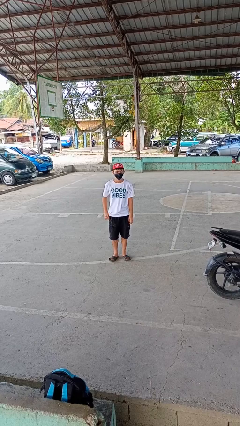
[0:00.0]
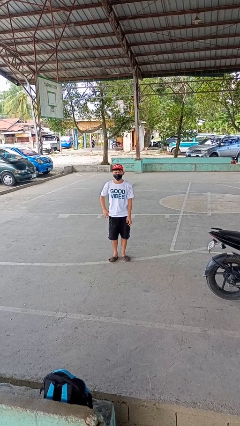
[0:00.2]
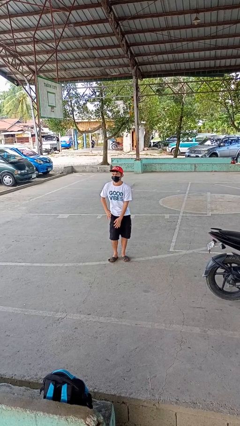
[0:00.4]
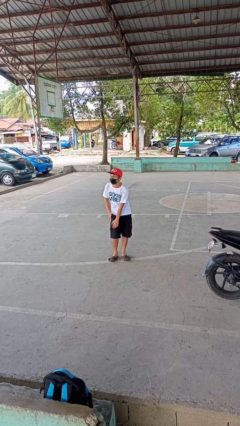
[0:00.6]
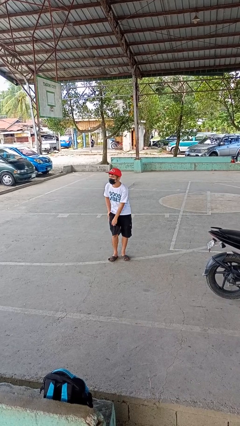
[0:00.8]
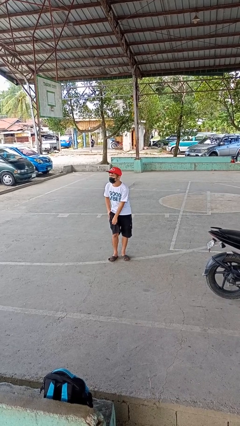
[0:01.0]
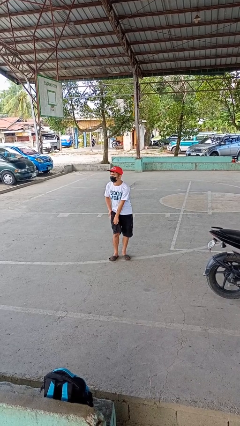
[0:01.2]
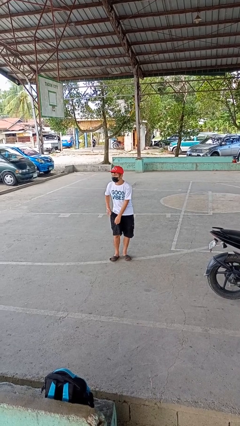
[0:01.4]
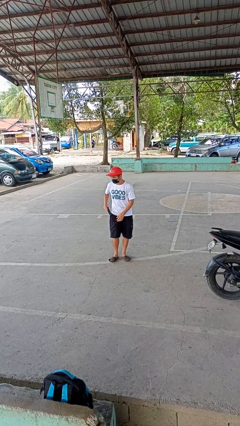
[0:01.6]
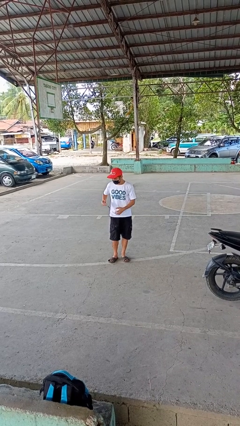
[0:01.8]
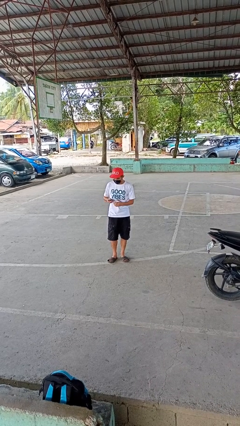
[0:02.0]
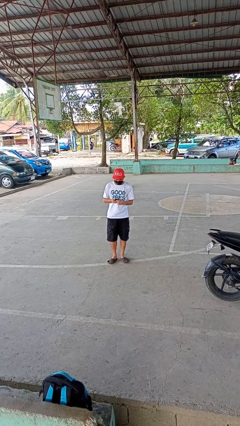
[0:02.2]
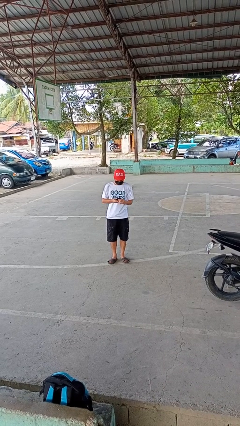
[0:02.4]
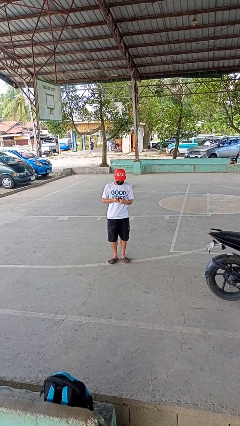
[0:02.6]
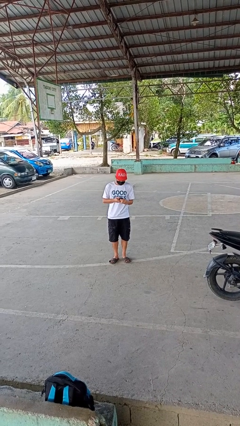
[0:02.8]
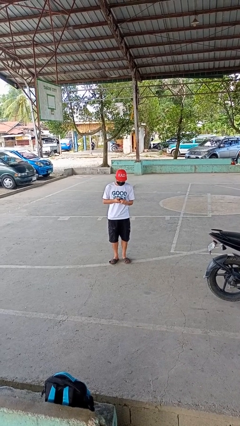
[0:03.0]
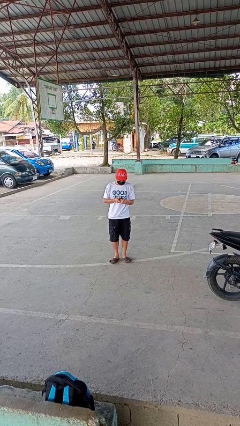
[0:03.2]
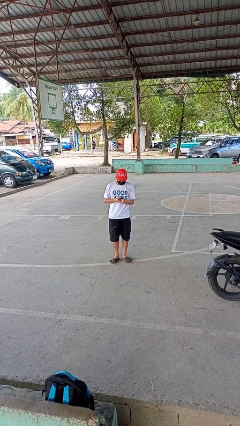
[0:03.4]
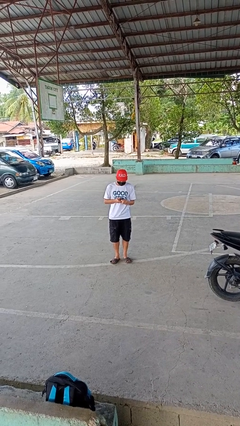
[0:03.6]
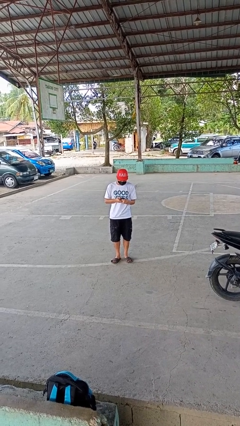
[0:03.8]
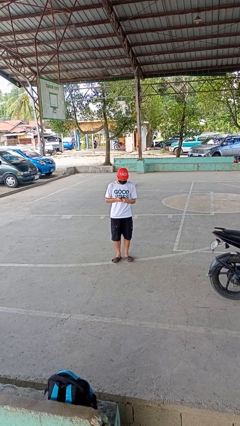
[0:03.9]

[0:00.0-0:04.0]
person takes phone from pocket

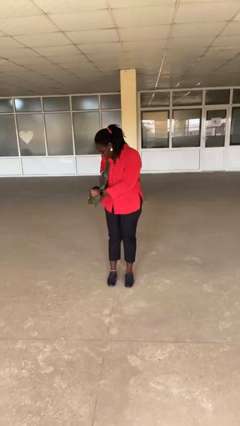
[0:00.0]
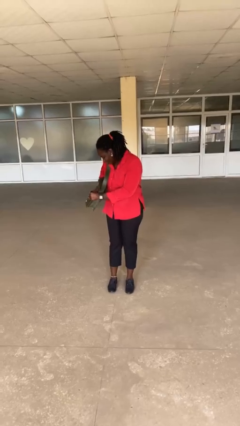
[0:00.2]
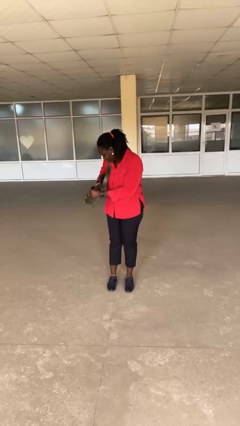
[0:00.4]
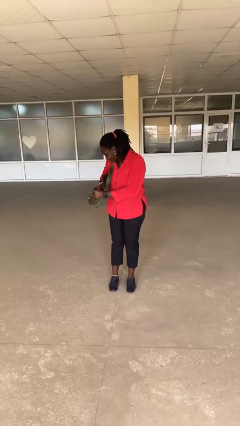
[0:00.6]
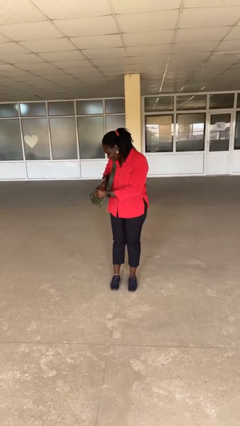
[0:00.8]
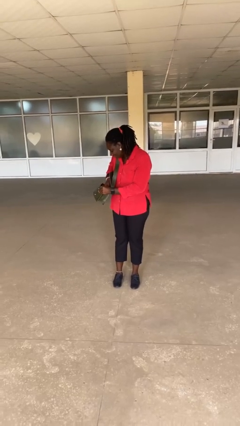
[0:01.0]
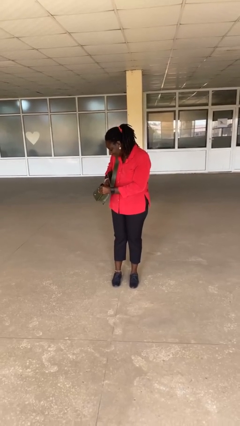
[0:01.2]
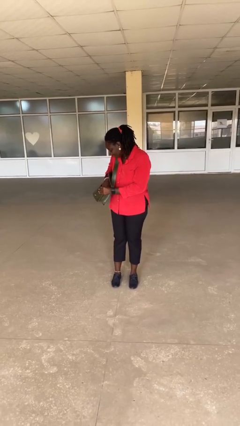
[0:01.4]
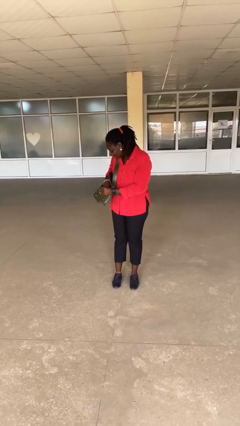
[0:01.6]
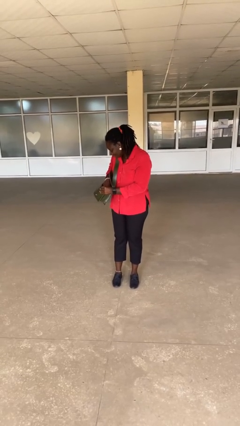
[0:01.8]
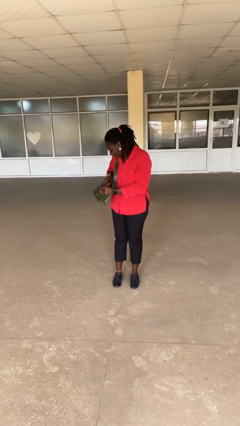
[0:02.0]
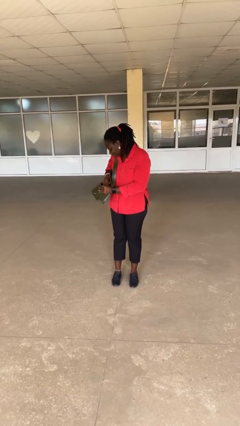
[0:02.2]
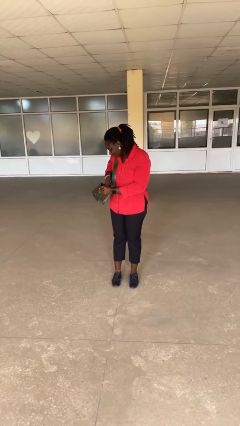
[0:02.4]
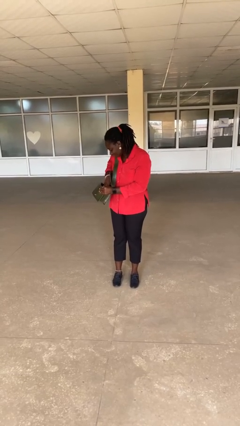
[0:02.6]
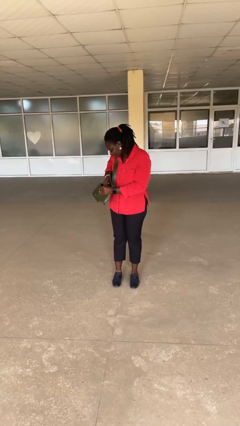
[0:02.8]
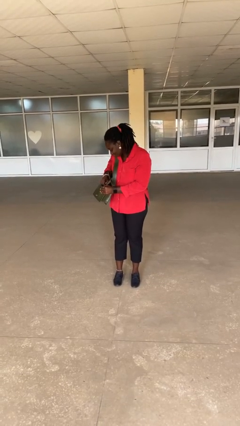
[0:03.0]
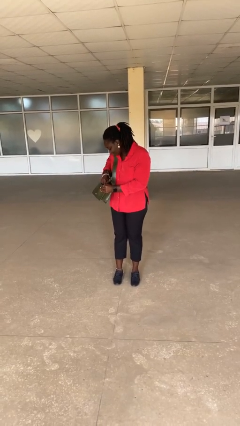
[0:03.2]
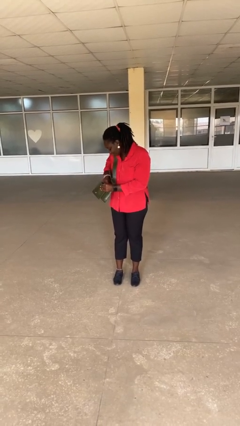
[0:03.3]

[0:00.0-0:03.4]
person searches in purse

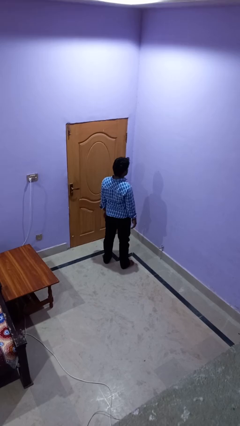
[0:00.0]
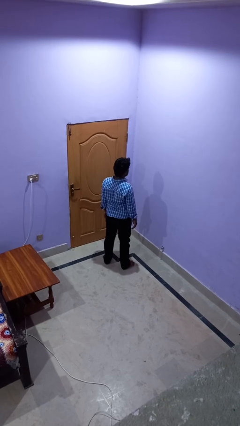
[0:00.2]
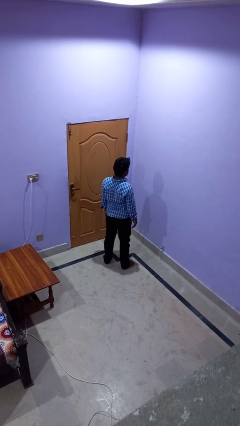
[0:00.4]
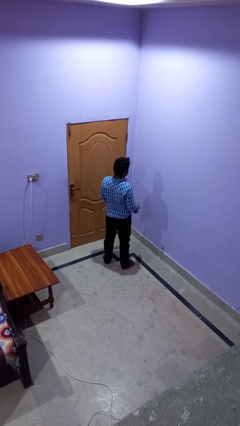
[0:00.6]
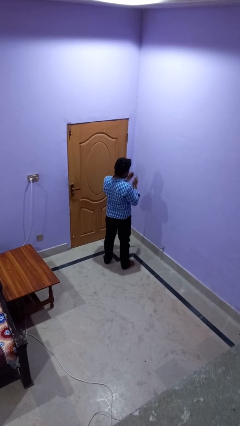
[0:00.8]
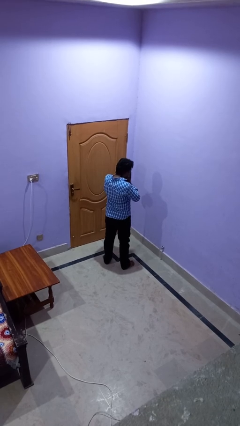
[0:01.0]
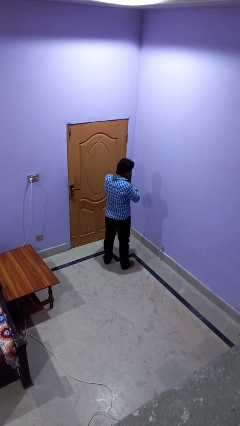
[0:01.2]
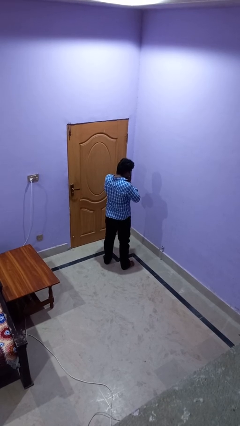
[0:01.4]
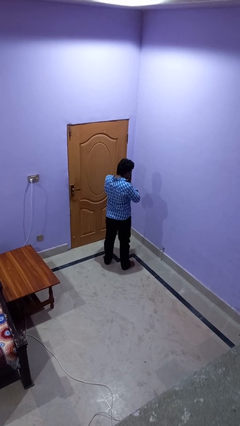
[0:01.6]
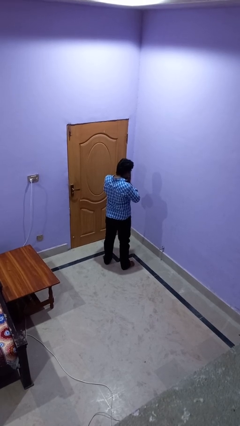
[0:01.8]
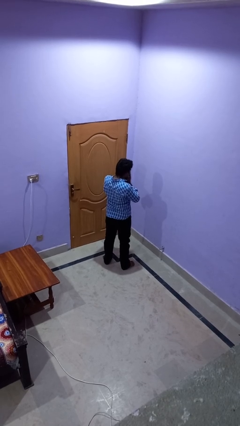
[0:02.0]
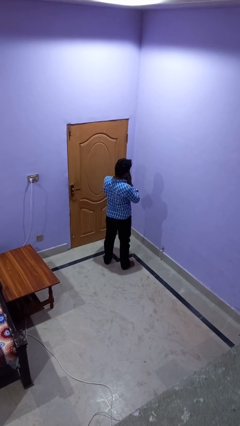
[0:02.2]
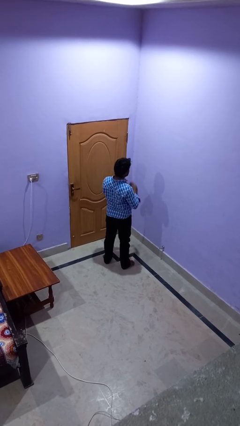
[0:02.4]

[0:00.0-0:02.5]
person sneezes into hand

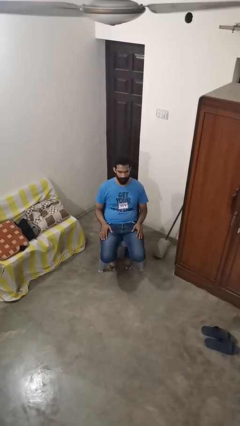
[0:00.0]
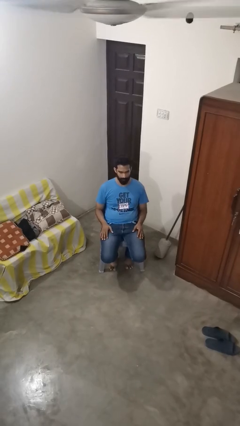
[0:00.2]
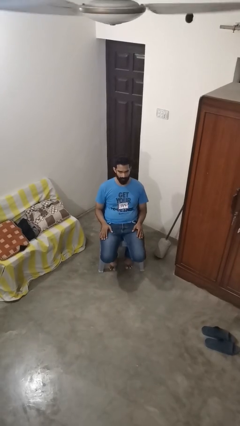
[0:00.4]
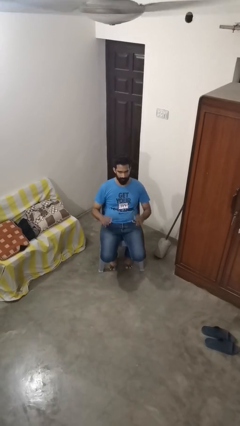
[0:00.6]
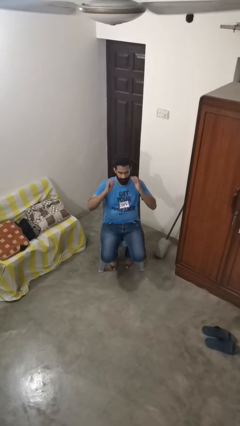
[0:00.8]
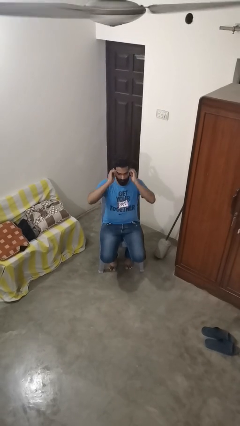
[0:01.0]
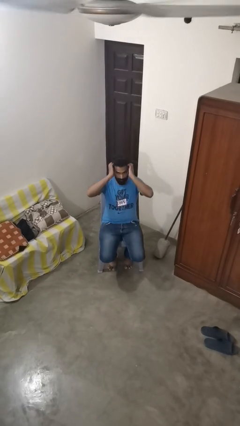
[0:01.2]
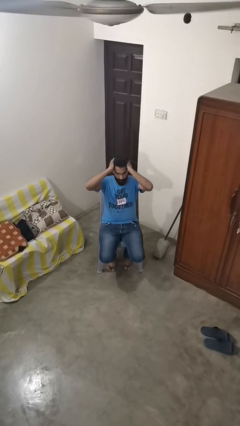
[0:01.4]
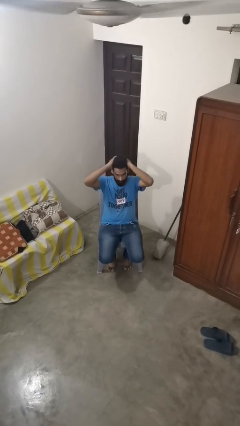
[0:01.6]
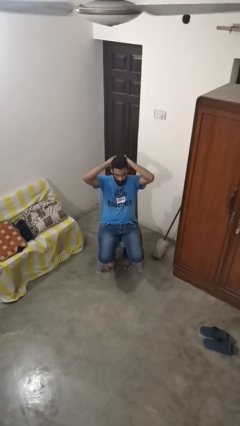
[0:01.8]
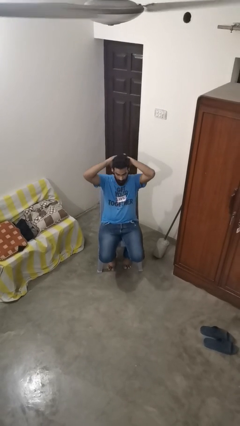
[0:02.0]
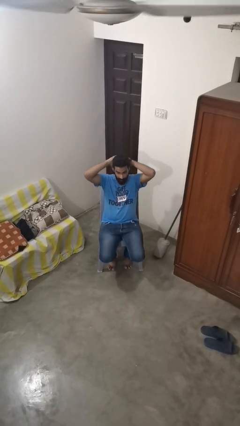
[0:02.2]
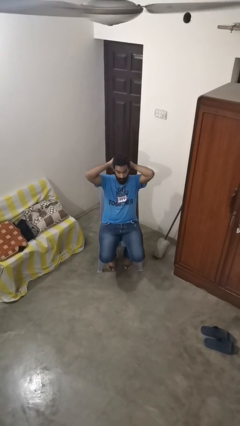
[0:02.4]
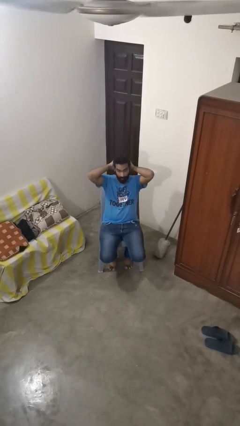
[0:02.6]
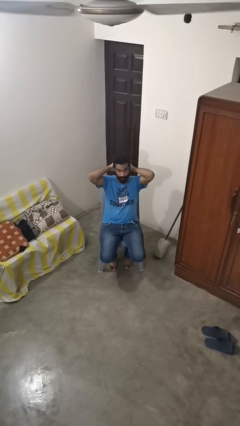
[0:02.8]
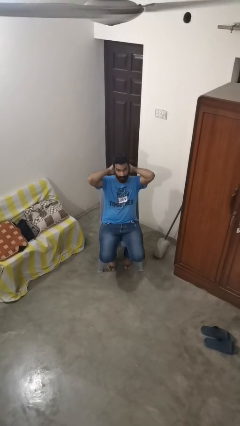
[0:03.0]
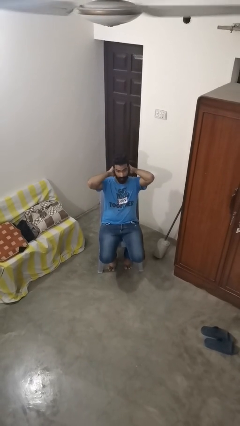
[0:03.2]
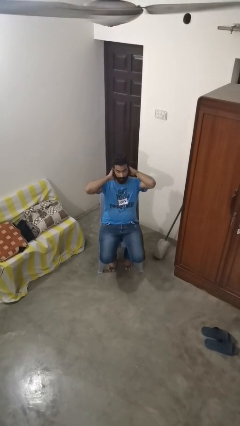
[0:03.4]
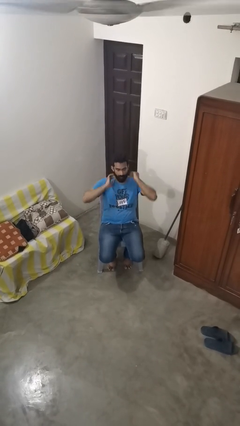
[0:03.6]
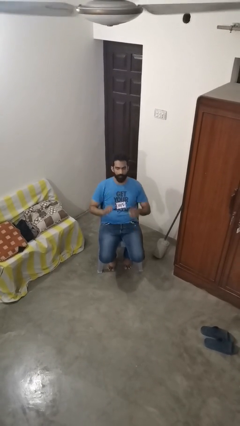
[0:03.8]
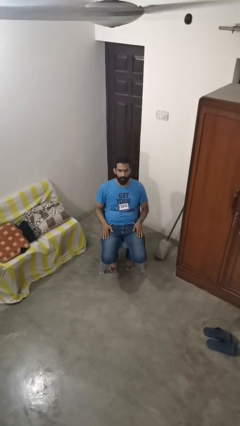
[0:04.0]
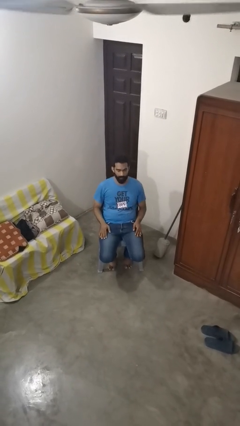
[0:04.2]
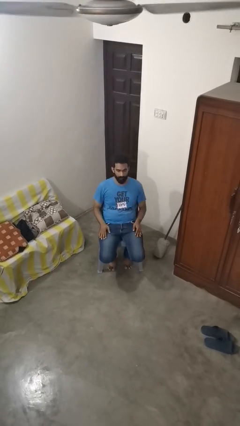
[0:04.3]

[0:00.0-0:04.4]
person strokes hair

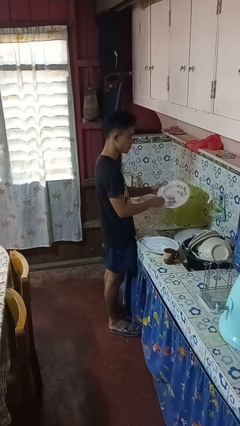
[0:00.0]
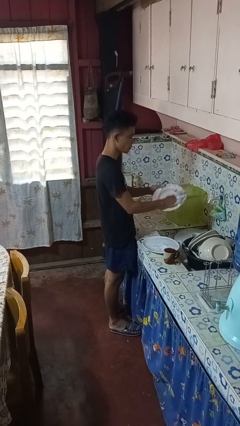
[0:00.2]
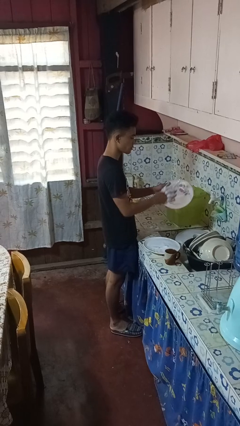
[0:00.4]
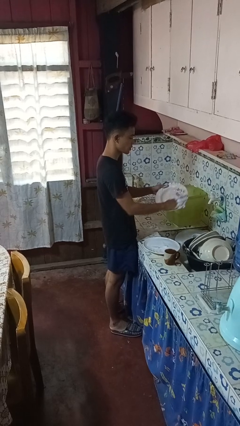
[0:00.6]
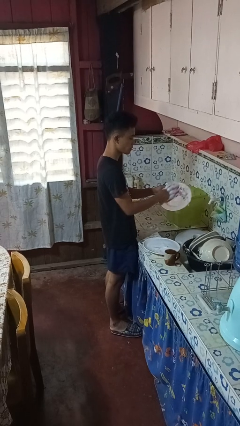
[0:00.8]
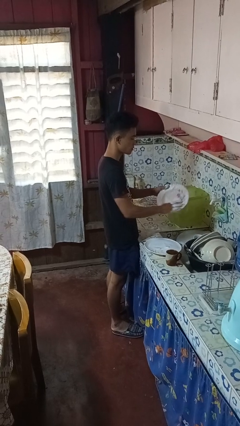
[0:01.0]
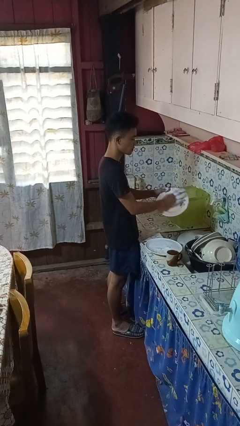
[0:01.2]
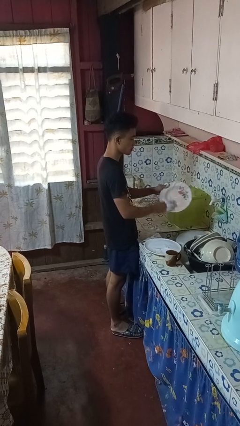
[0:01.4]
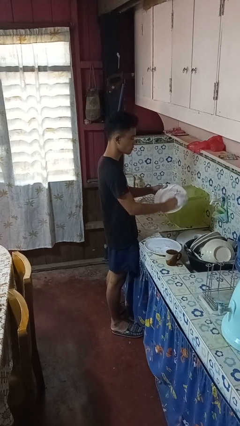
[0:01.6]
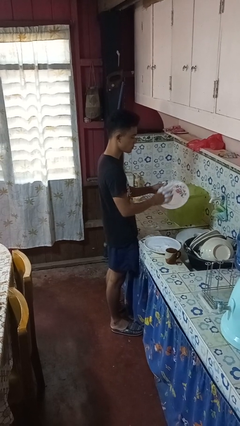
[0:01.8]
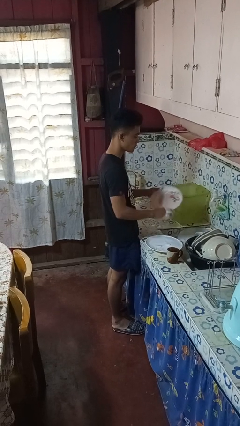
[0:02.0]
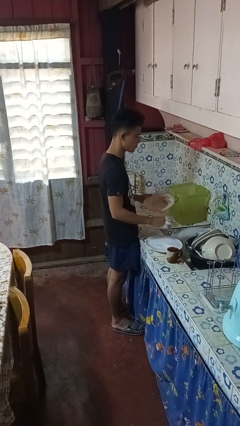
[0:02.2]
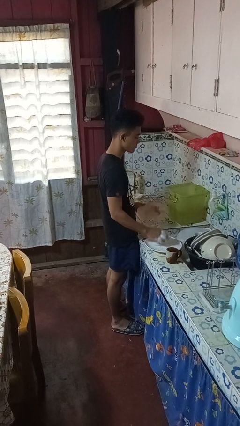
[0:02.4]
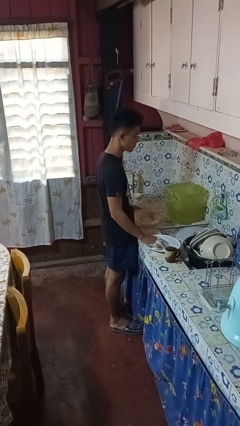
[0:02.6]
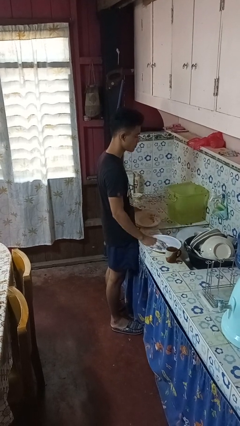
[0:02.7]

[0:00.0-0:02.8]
person washes dish

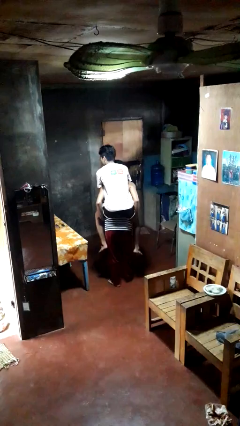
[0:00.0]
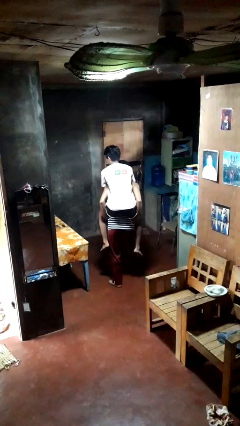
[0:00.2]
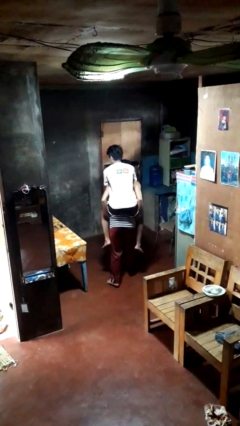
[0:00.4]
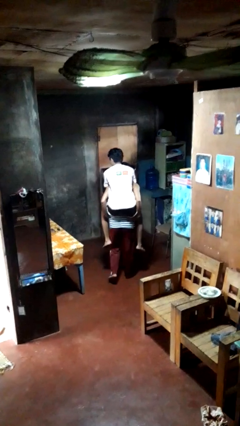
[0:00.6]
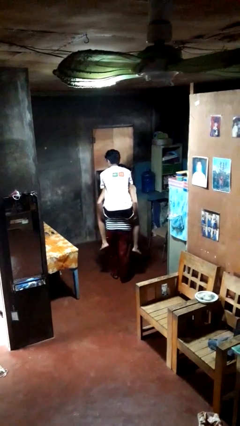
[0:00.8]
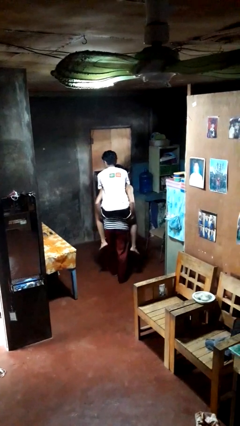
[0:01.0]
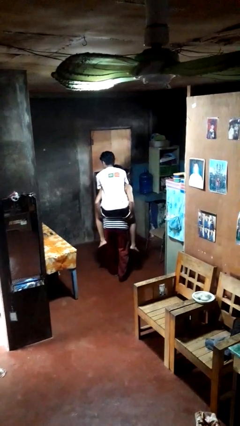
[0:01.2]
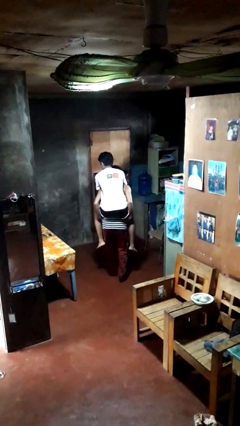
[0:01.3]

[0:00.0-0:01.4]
person carries person on back
